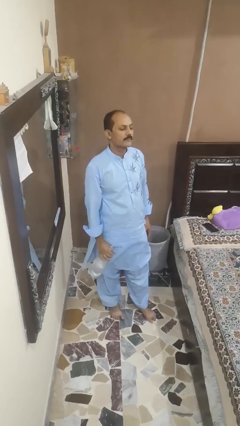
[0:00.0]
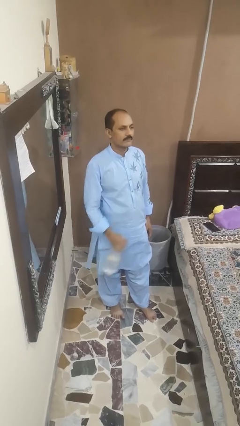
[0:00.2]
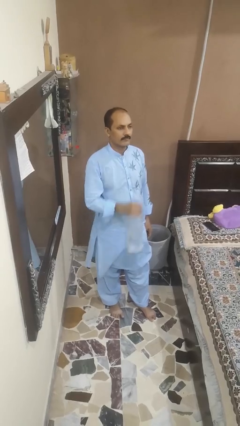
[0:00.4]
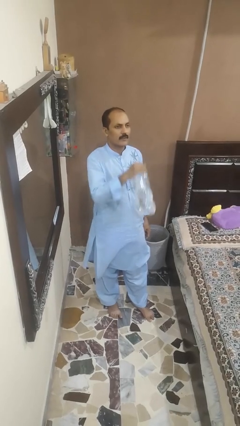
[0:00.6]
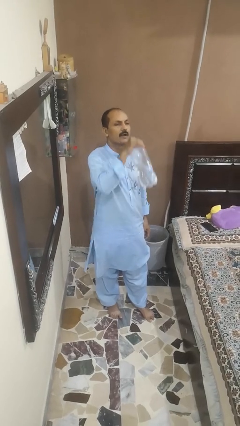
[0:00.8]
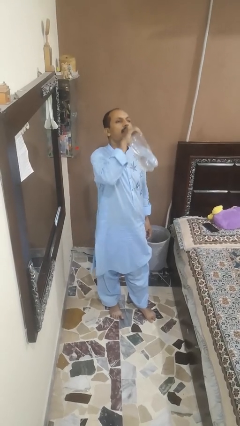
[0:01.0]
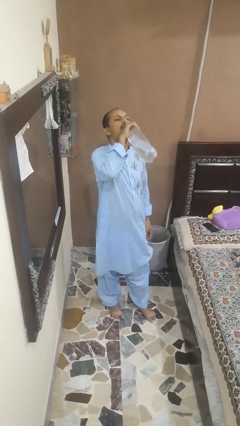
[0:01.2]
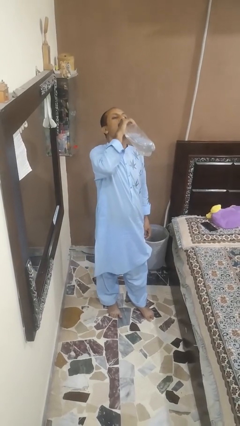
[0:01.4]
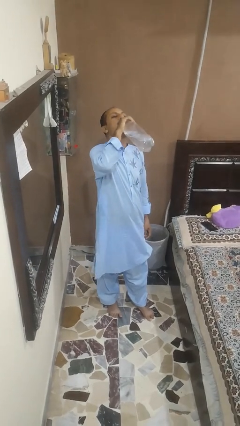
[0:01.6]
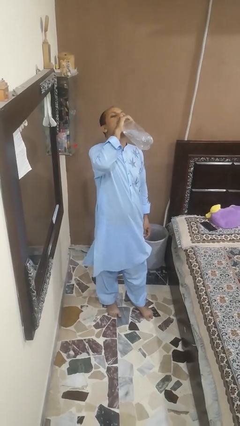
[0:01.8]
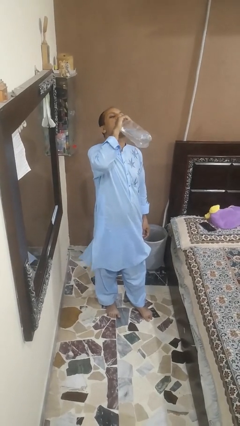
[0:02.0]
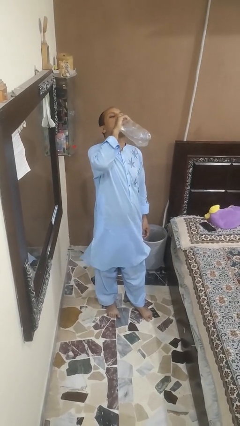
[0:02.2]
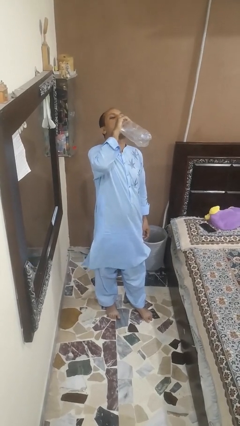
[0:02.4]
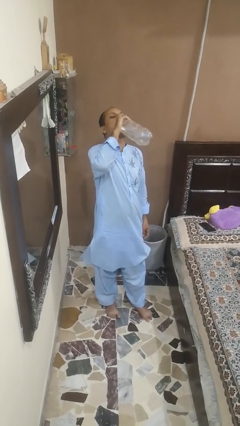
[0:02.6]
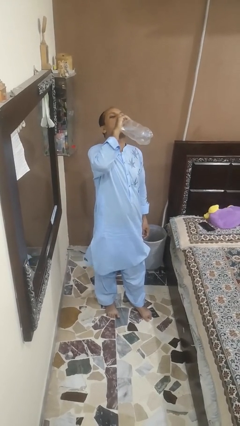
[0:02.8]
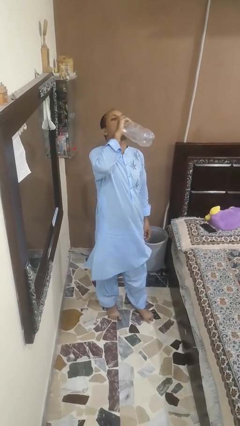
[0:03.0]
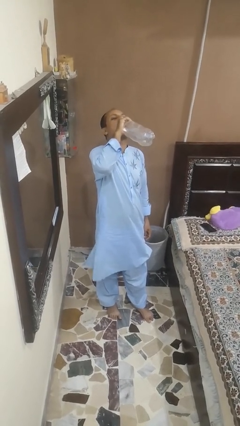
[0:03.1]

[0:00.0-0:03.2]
person drinks from bottle

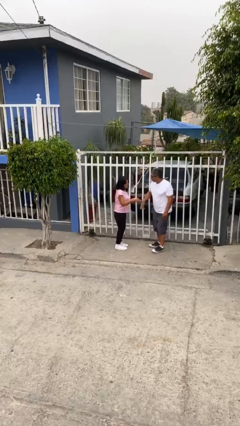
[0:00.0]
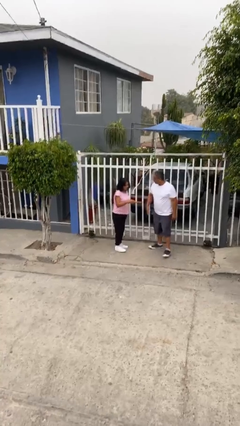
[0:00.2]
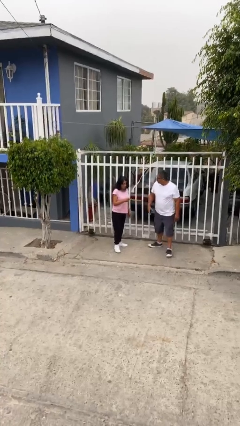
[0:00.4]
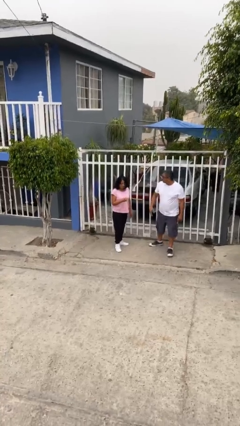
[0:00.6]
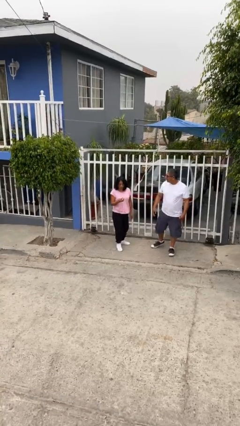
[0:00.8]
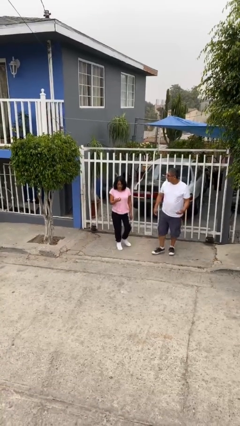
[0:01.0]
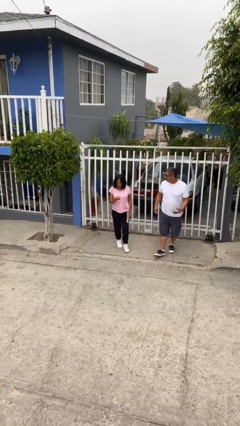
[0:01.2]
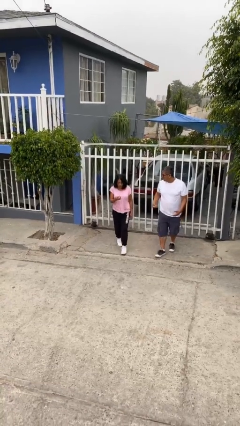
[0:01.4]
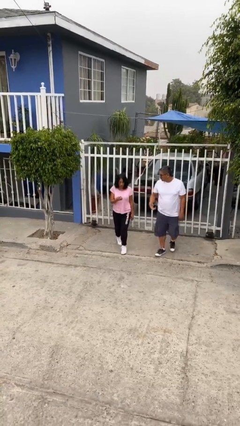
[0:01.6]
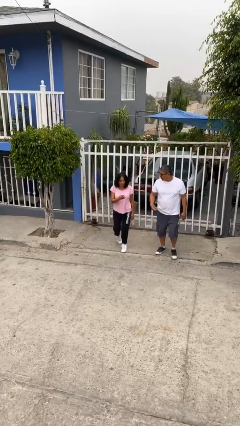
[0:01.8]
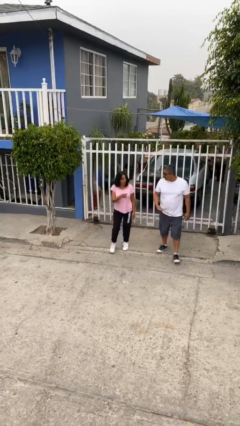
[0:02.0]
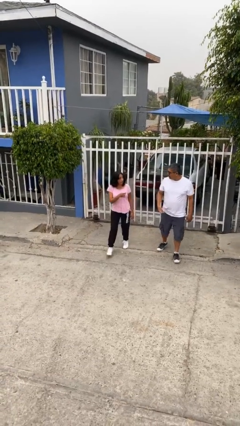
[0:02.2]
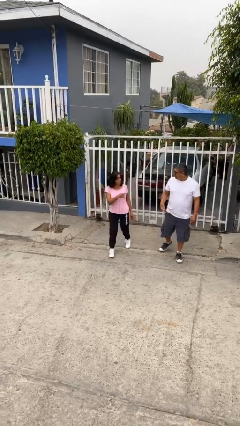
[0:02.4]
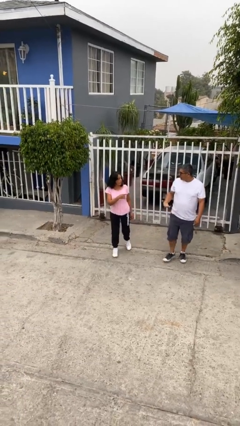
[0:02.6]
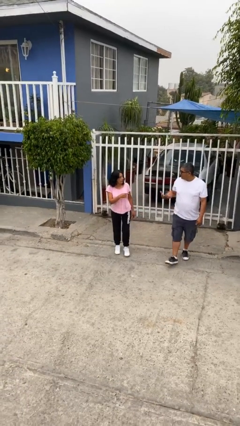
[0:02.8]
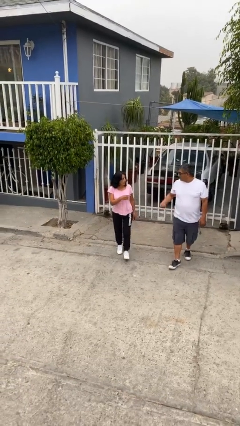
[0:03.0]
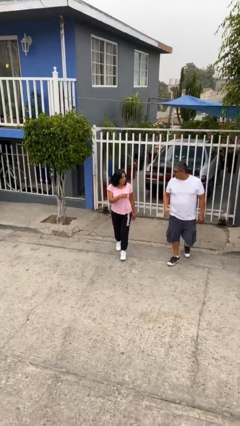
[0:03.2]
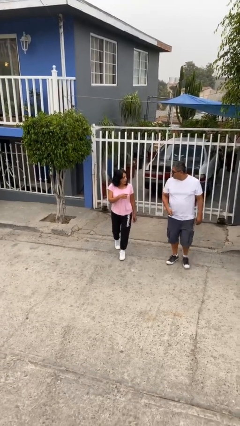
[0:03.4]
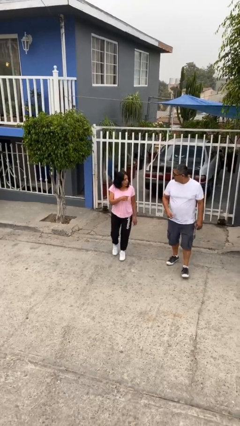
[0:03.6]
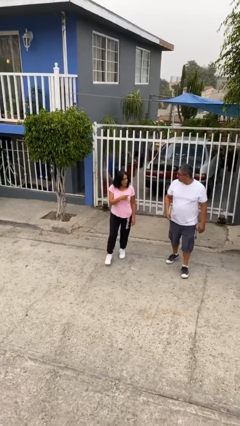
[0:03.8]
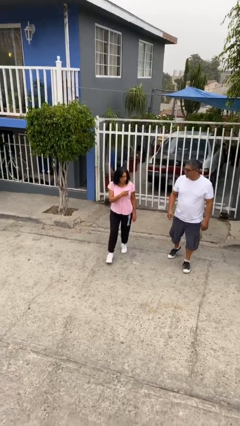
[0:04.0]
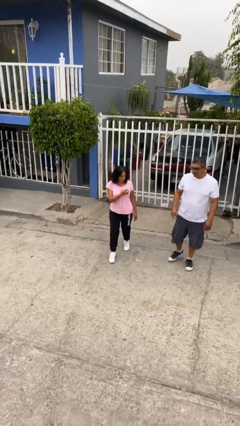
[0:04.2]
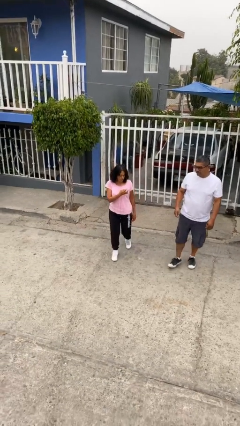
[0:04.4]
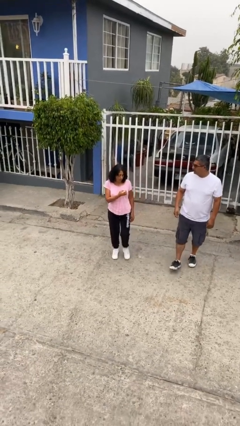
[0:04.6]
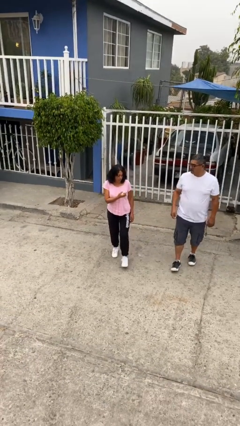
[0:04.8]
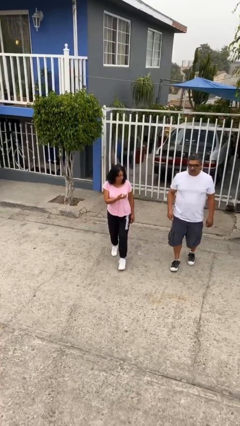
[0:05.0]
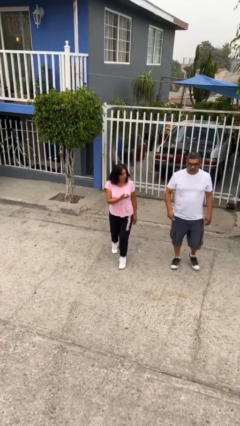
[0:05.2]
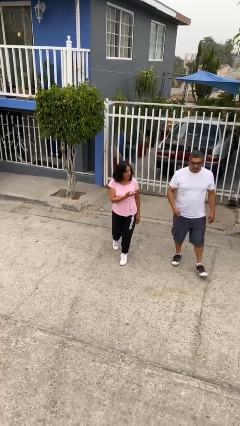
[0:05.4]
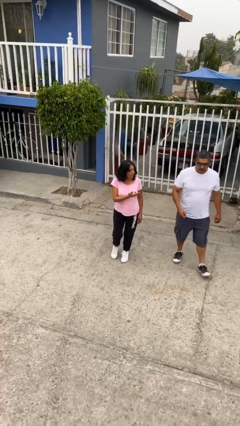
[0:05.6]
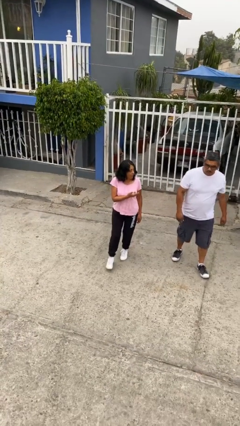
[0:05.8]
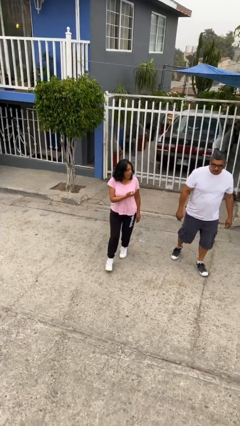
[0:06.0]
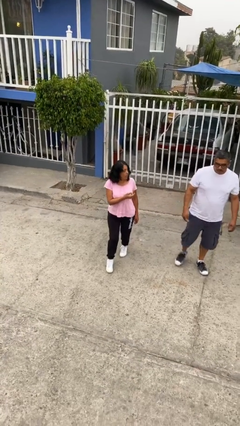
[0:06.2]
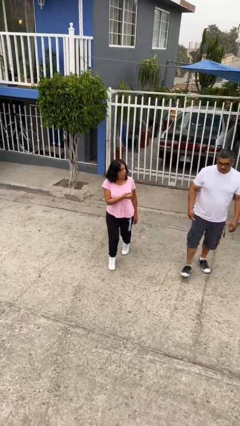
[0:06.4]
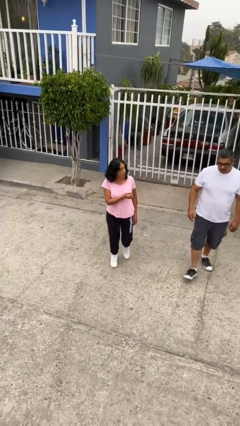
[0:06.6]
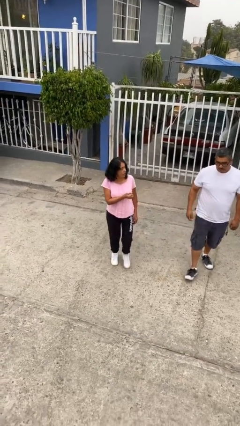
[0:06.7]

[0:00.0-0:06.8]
person talks to person

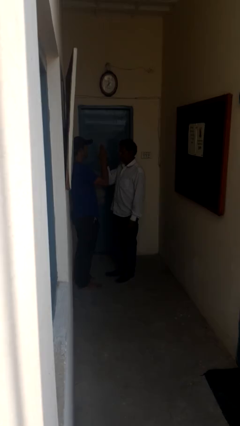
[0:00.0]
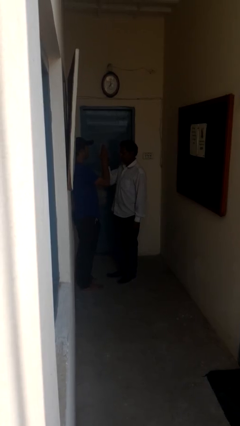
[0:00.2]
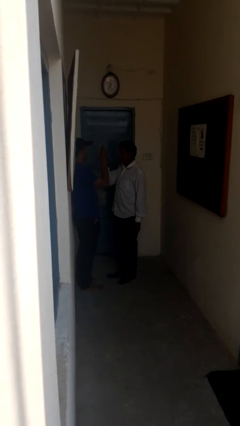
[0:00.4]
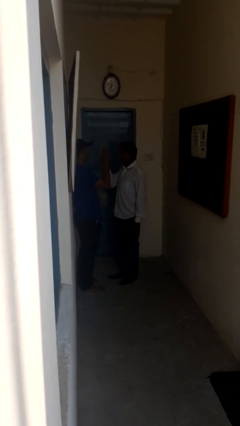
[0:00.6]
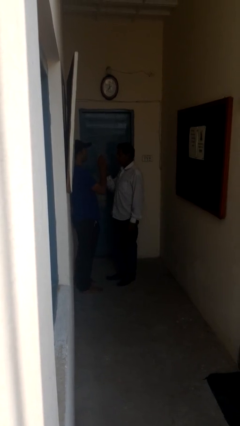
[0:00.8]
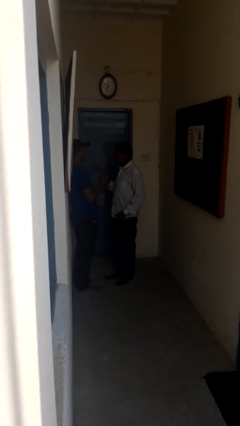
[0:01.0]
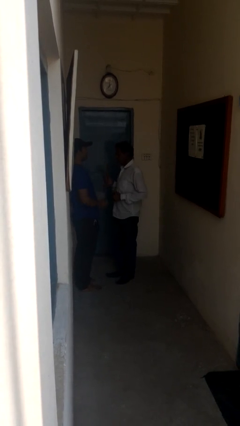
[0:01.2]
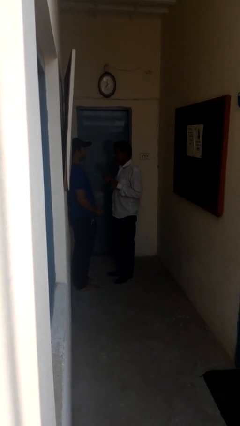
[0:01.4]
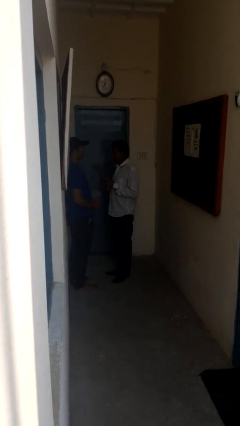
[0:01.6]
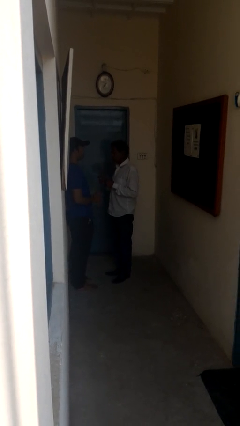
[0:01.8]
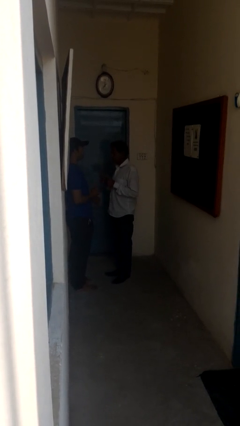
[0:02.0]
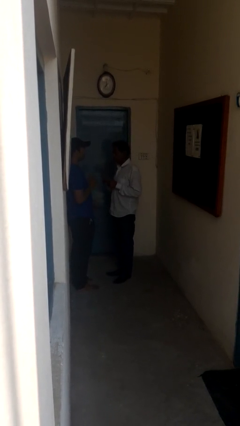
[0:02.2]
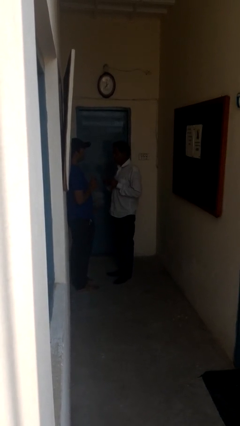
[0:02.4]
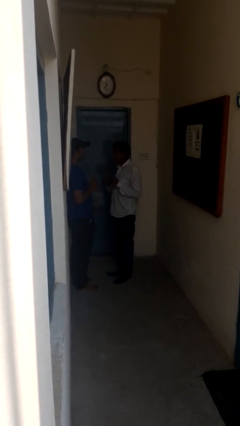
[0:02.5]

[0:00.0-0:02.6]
person highfives hand

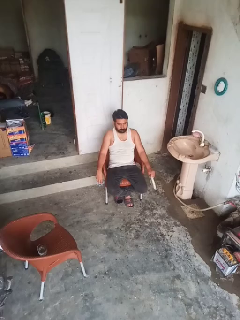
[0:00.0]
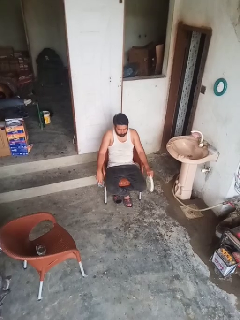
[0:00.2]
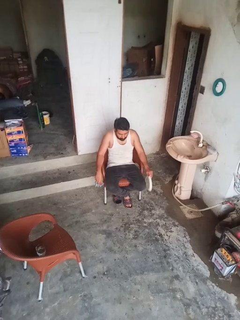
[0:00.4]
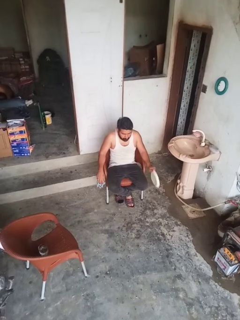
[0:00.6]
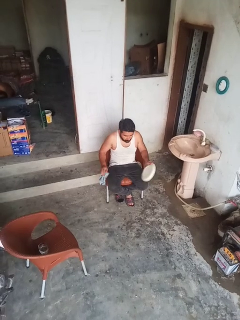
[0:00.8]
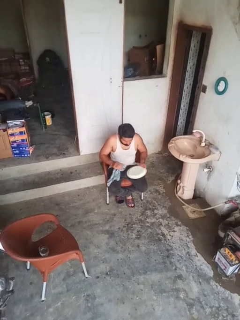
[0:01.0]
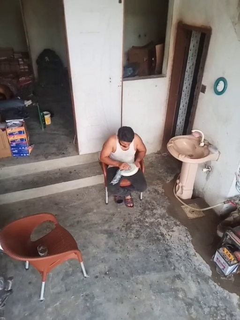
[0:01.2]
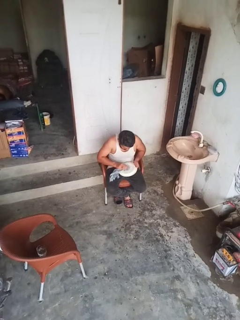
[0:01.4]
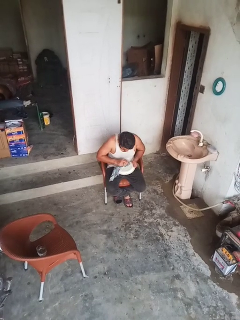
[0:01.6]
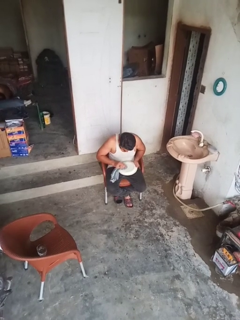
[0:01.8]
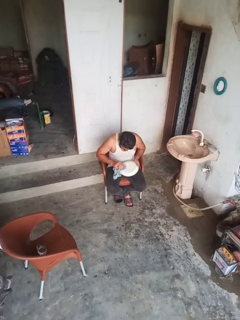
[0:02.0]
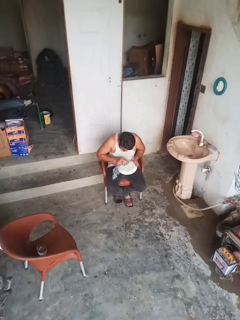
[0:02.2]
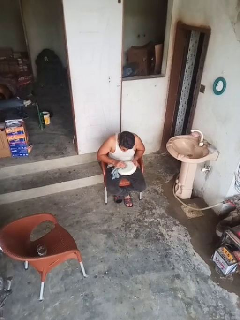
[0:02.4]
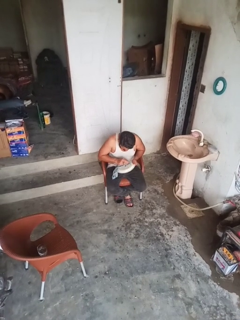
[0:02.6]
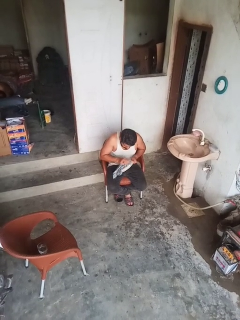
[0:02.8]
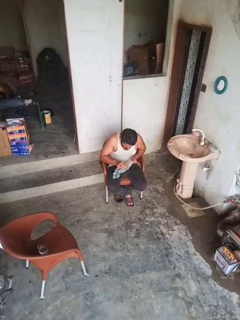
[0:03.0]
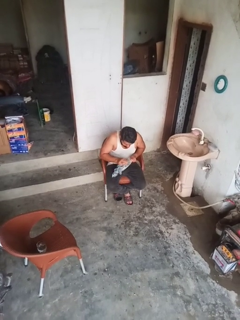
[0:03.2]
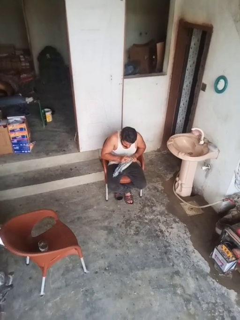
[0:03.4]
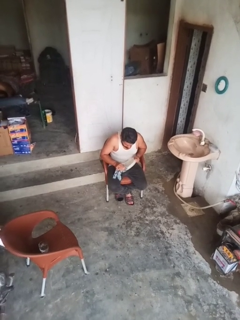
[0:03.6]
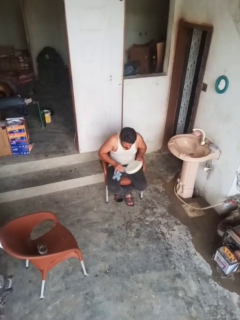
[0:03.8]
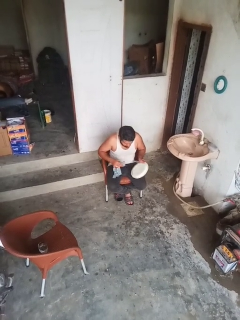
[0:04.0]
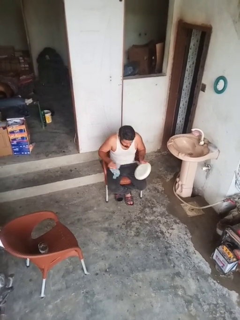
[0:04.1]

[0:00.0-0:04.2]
person dries dish

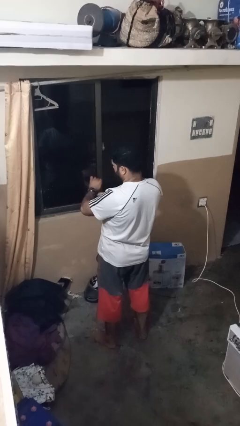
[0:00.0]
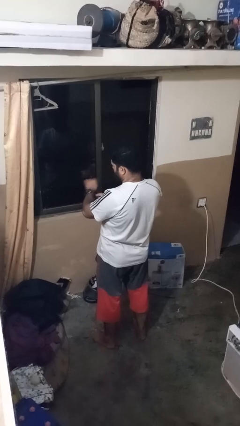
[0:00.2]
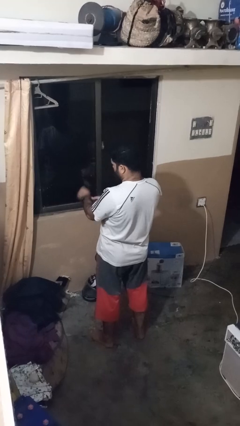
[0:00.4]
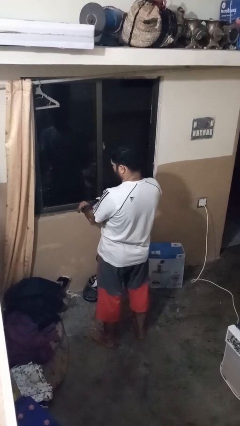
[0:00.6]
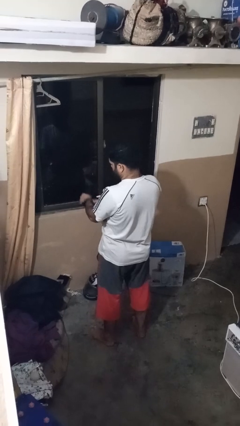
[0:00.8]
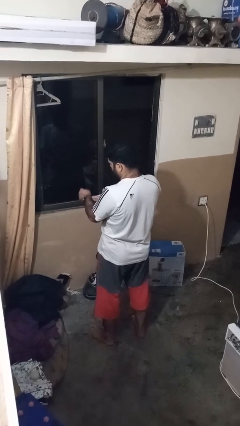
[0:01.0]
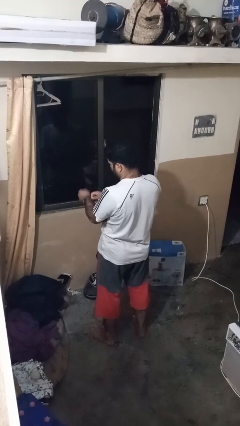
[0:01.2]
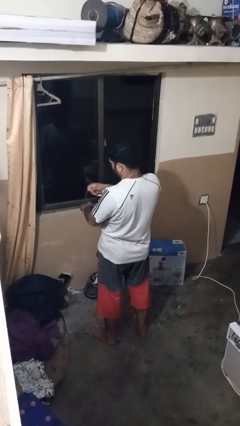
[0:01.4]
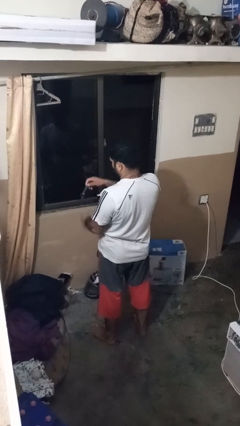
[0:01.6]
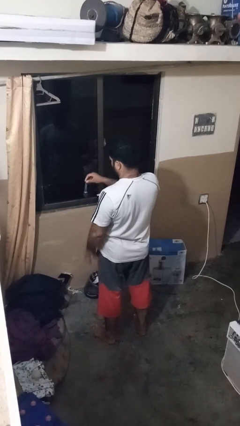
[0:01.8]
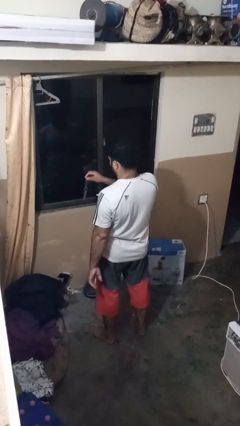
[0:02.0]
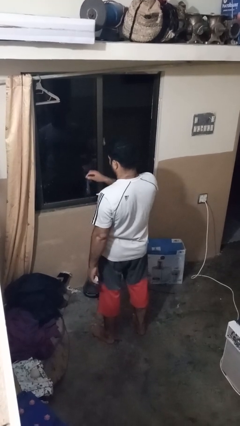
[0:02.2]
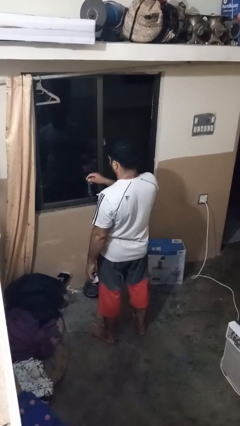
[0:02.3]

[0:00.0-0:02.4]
person takes off wristwatch
